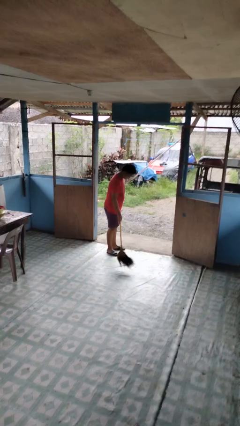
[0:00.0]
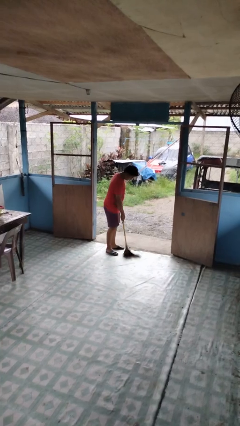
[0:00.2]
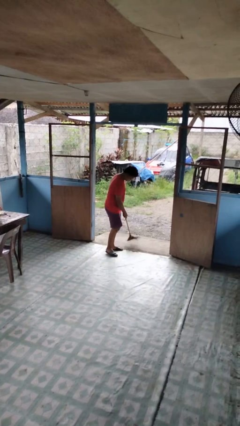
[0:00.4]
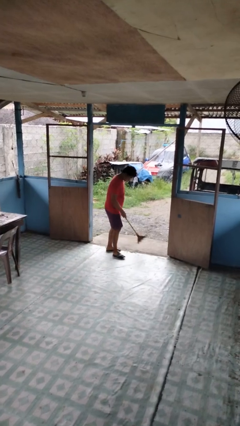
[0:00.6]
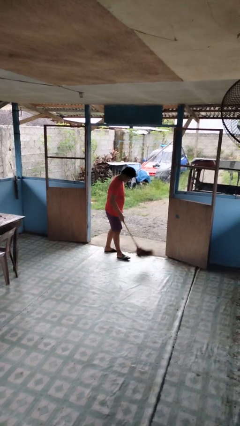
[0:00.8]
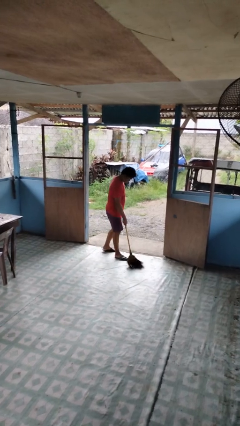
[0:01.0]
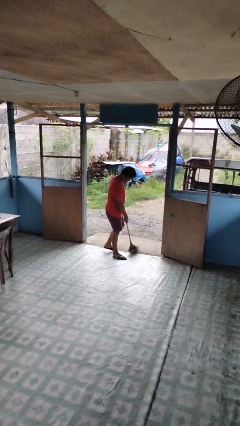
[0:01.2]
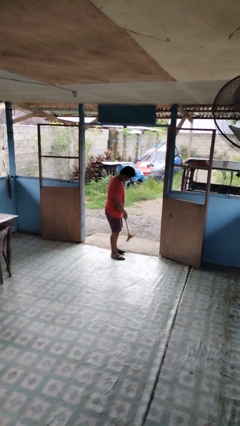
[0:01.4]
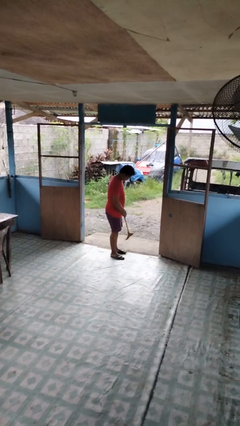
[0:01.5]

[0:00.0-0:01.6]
person sweeps floor

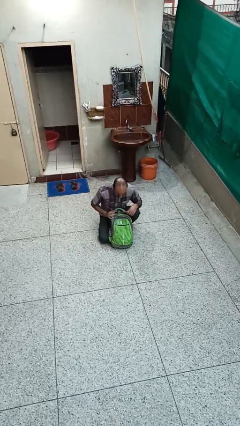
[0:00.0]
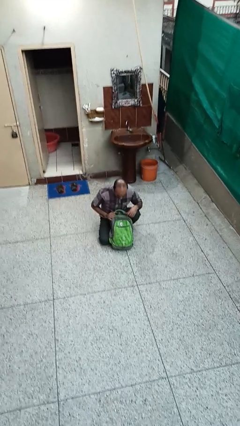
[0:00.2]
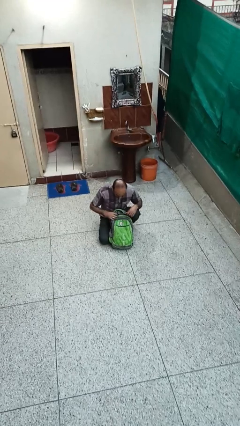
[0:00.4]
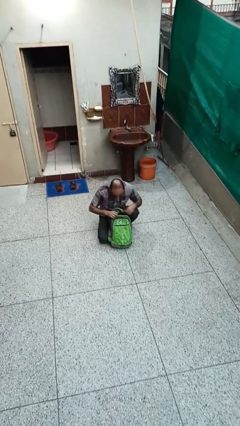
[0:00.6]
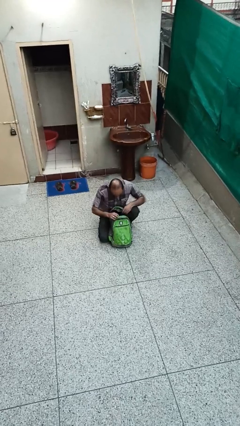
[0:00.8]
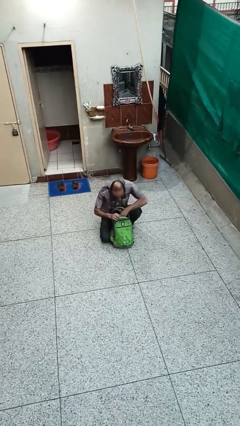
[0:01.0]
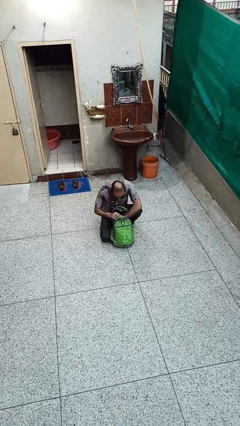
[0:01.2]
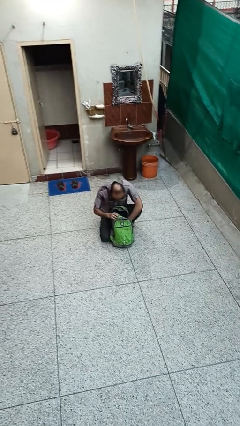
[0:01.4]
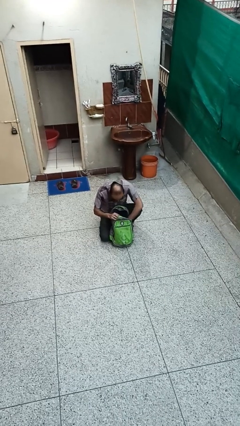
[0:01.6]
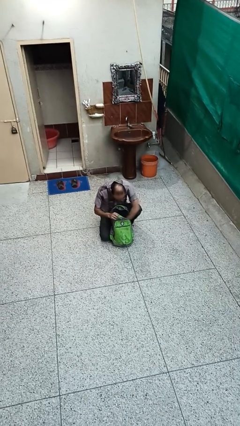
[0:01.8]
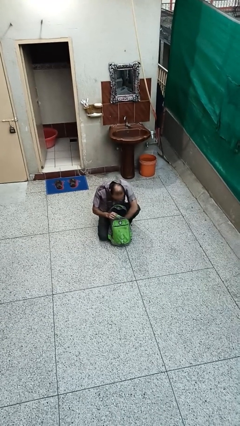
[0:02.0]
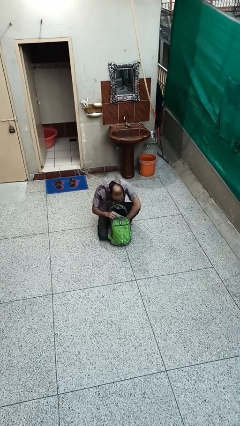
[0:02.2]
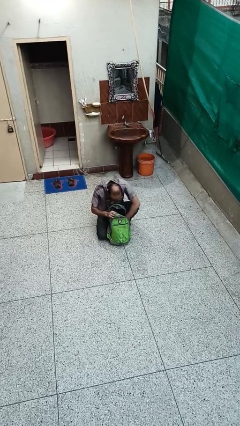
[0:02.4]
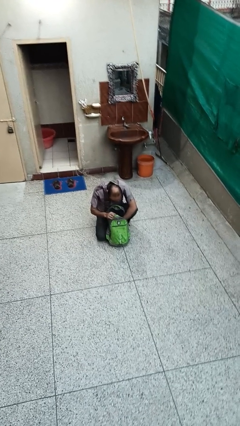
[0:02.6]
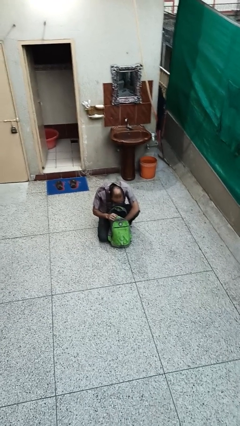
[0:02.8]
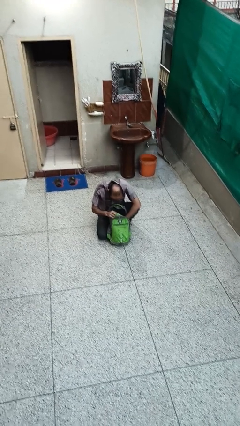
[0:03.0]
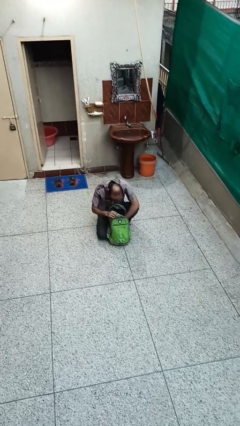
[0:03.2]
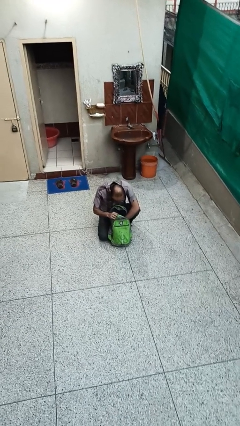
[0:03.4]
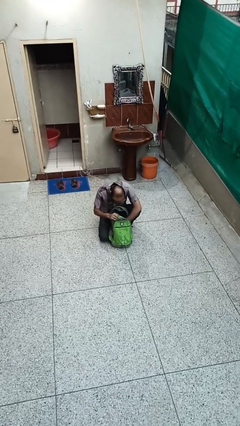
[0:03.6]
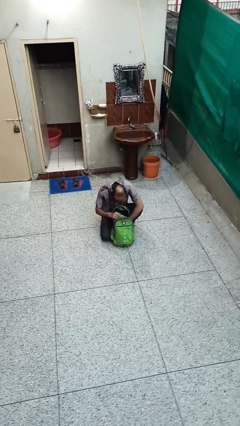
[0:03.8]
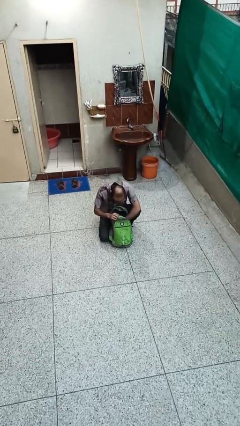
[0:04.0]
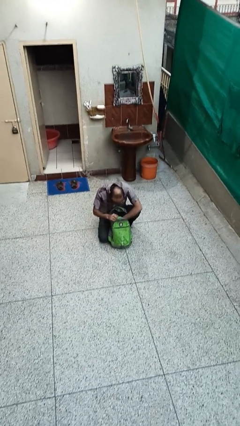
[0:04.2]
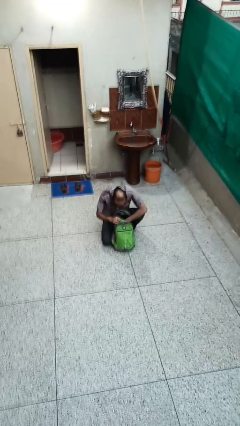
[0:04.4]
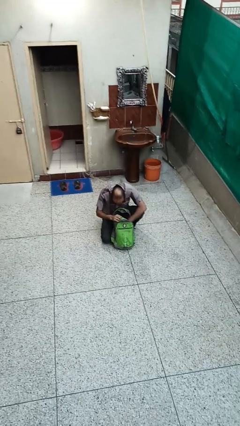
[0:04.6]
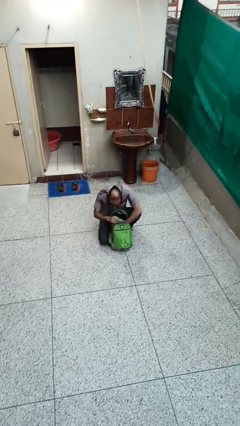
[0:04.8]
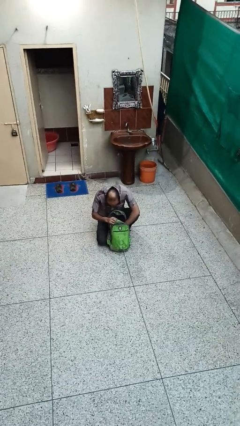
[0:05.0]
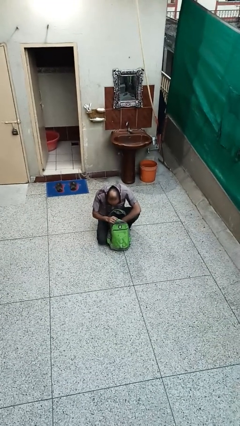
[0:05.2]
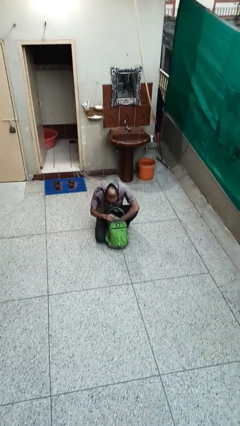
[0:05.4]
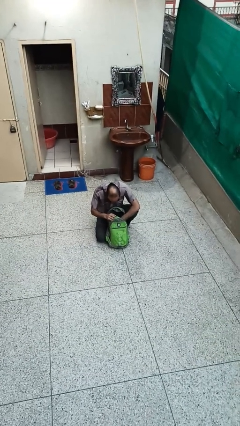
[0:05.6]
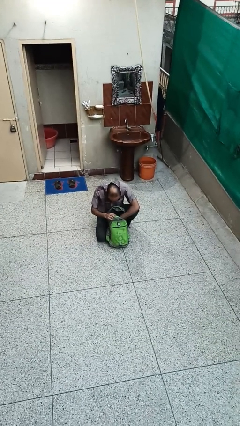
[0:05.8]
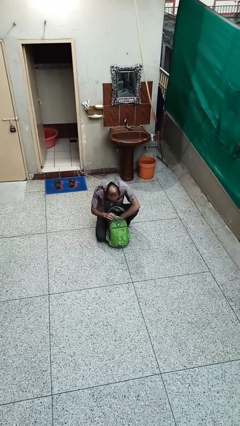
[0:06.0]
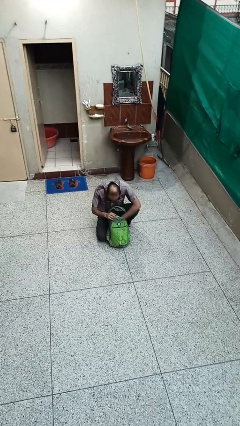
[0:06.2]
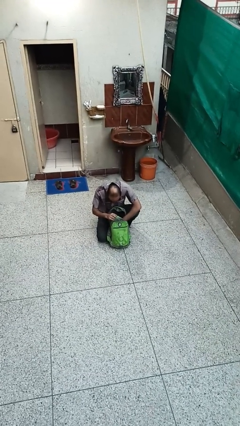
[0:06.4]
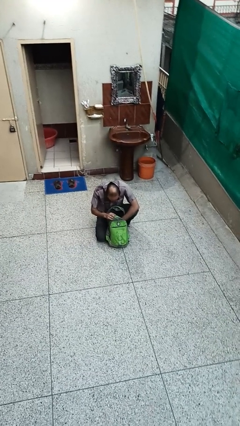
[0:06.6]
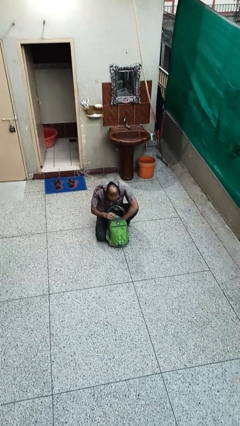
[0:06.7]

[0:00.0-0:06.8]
person searches in backpack

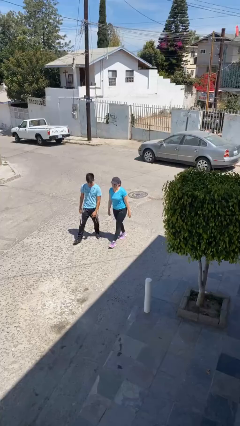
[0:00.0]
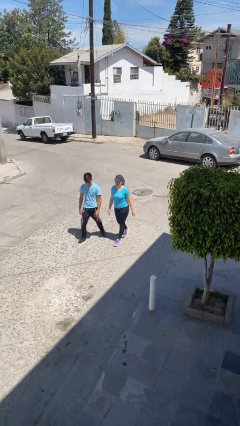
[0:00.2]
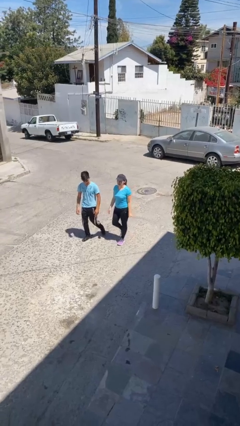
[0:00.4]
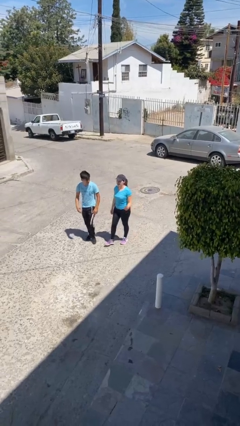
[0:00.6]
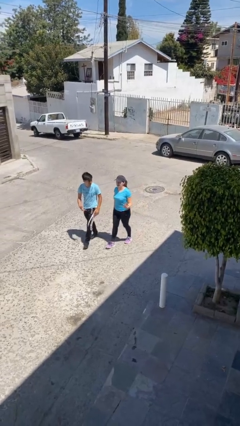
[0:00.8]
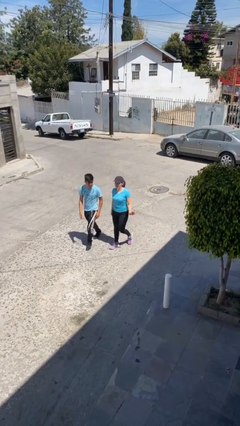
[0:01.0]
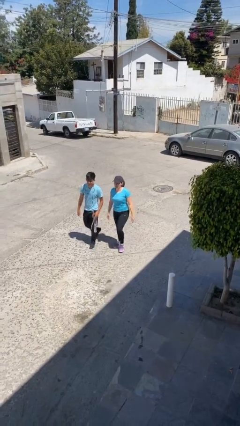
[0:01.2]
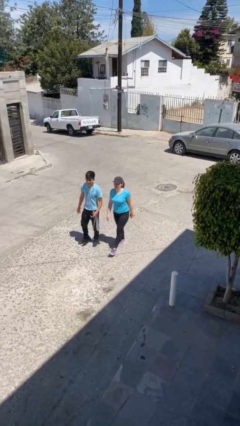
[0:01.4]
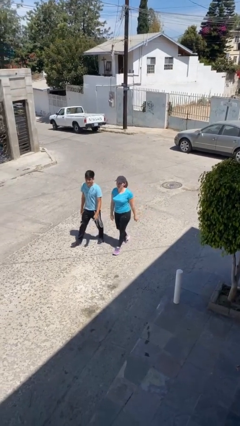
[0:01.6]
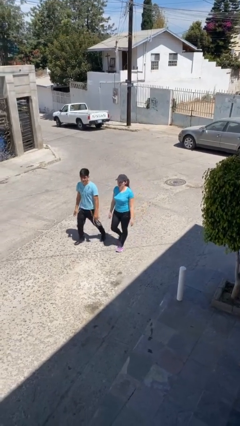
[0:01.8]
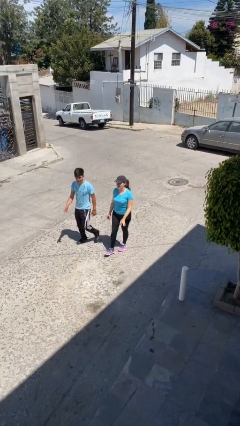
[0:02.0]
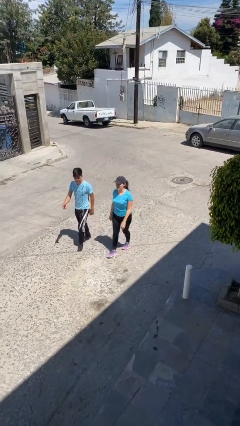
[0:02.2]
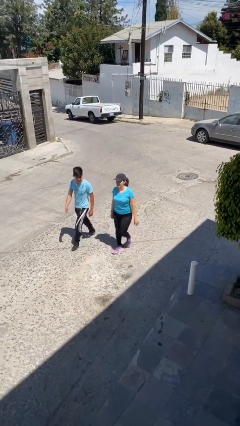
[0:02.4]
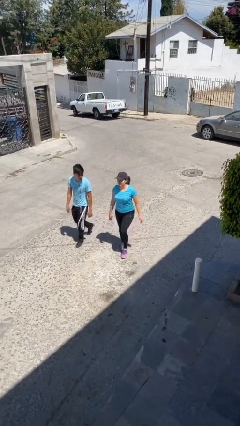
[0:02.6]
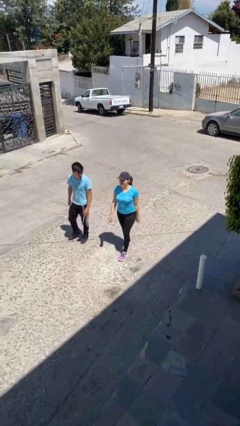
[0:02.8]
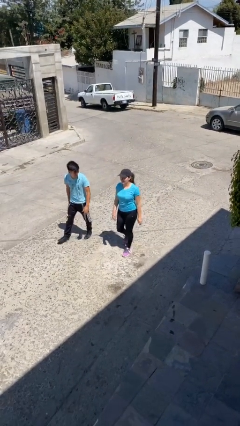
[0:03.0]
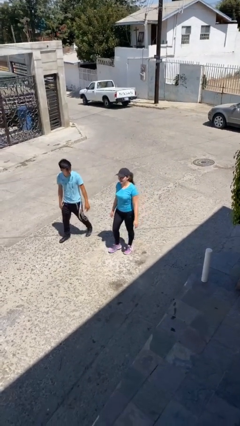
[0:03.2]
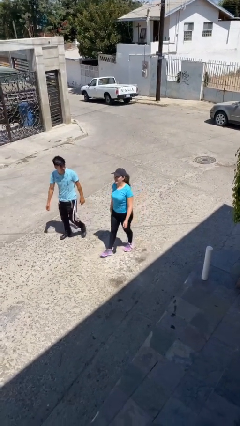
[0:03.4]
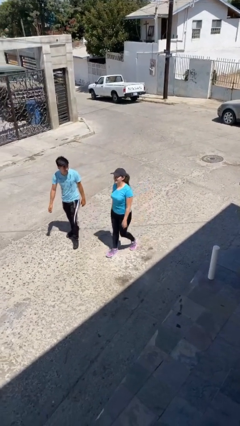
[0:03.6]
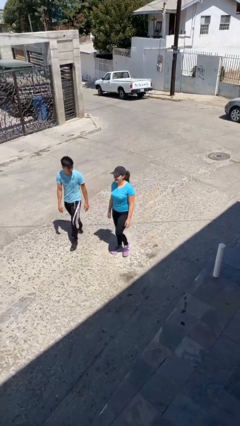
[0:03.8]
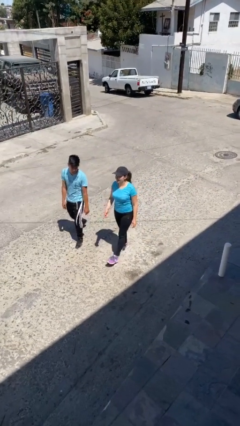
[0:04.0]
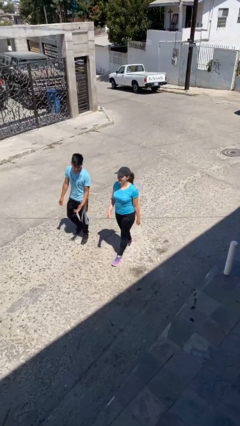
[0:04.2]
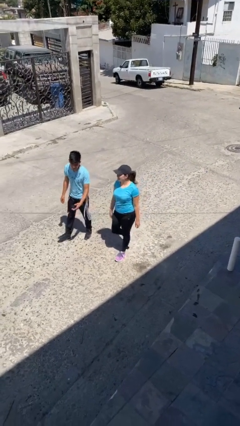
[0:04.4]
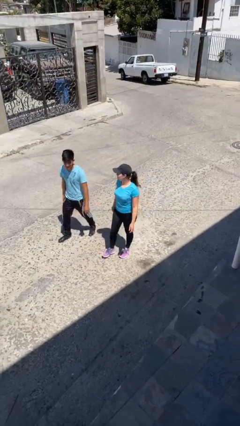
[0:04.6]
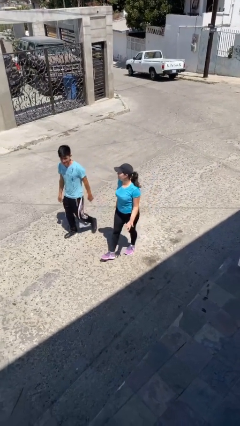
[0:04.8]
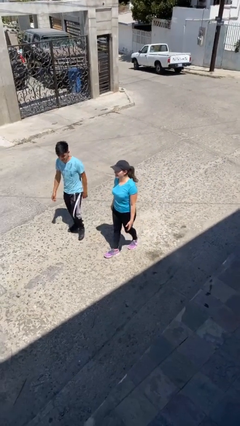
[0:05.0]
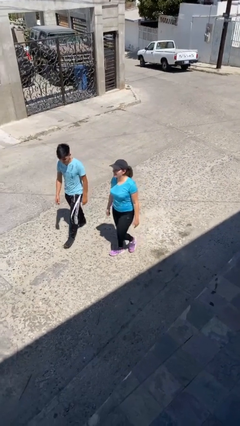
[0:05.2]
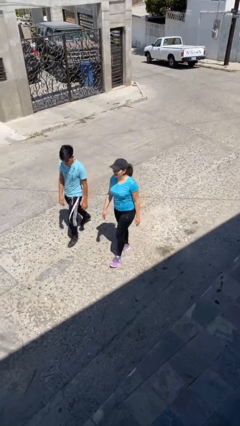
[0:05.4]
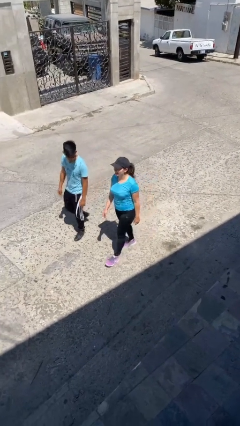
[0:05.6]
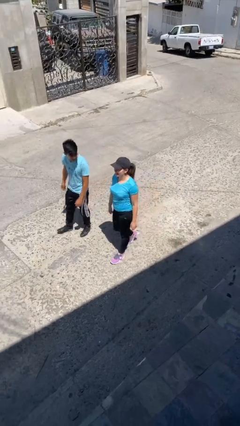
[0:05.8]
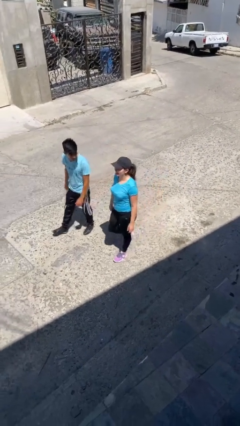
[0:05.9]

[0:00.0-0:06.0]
person talks to person

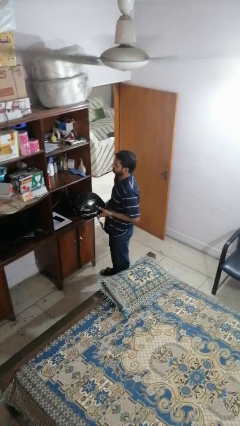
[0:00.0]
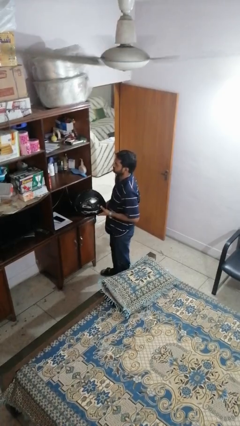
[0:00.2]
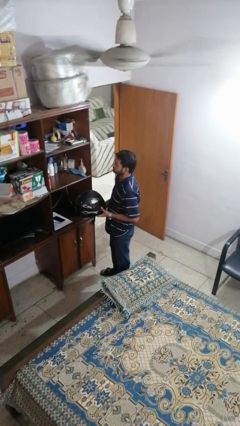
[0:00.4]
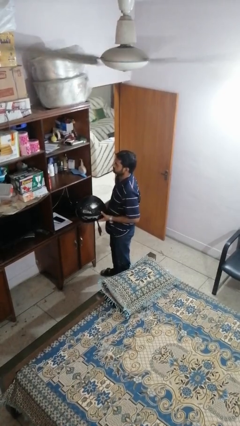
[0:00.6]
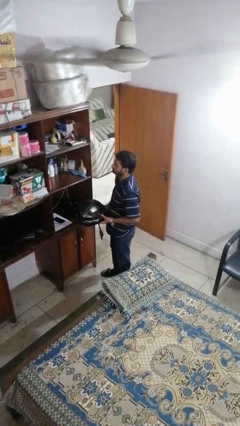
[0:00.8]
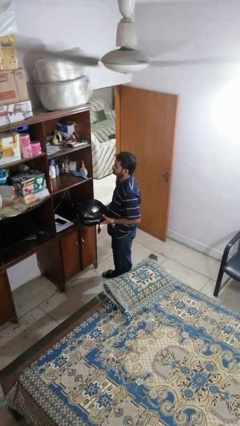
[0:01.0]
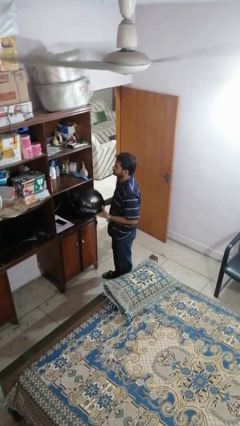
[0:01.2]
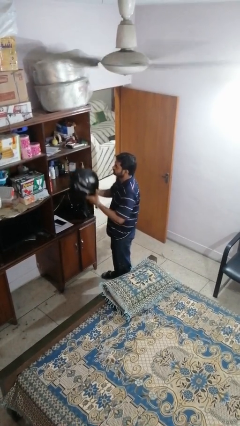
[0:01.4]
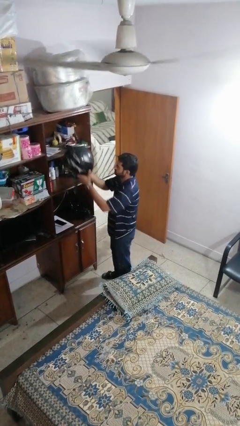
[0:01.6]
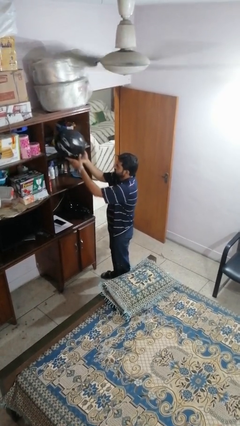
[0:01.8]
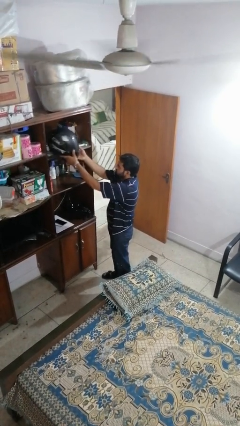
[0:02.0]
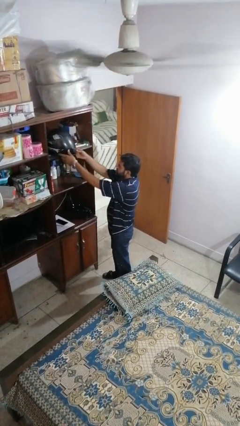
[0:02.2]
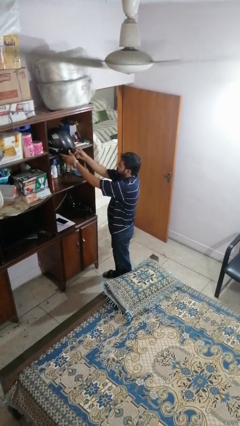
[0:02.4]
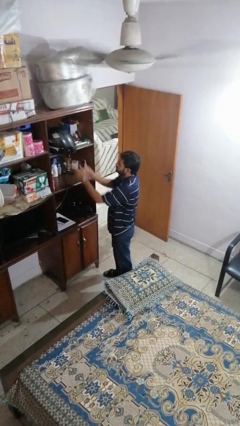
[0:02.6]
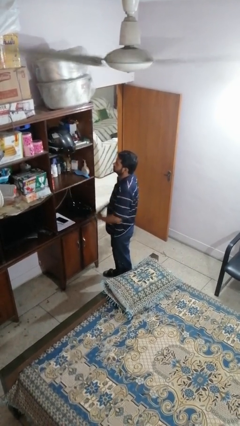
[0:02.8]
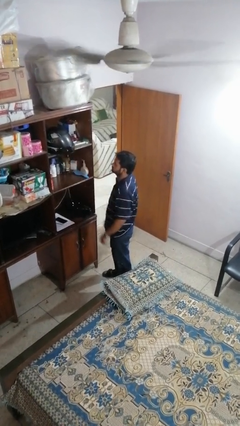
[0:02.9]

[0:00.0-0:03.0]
person puts down object on shelf
